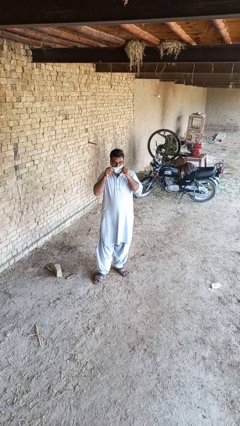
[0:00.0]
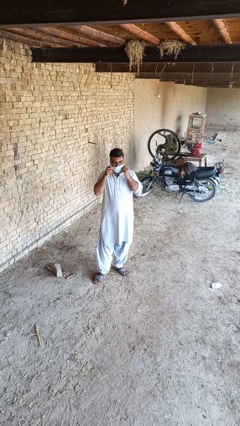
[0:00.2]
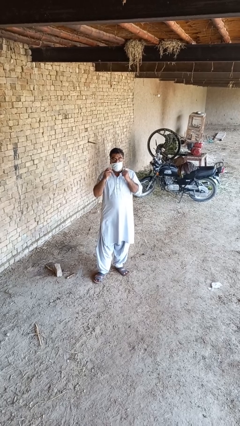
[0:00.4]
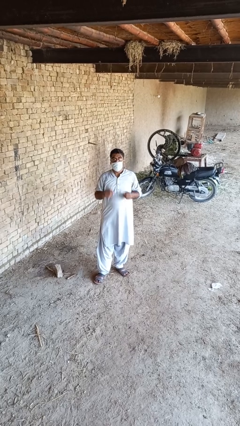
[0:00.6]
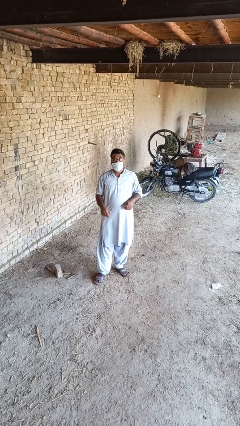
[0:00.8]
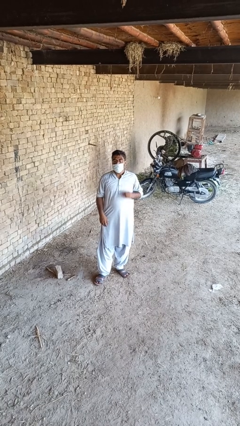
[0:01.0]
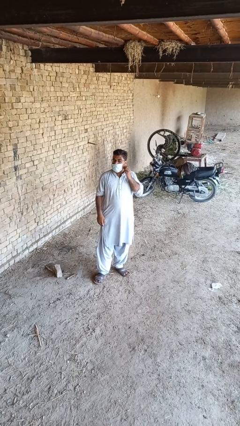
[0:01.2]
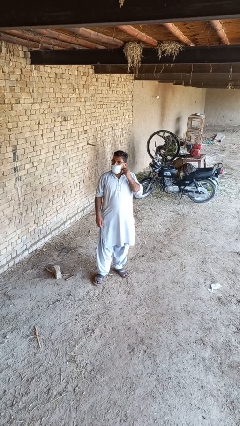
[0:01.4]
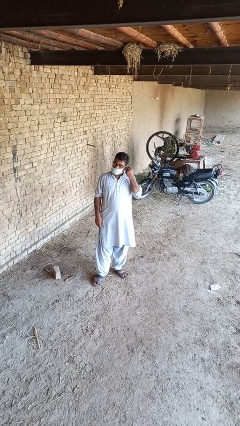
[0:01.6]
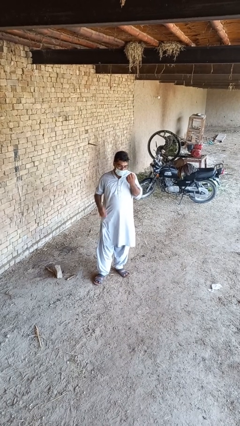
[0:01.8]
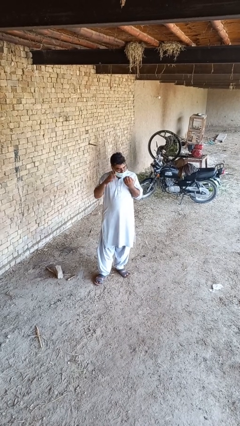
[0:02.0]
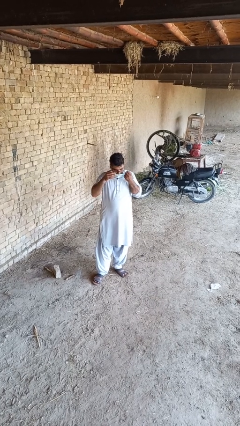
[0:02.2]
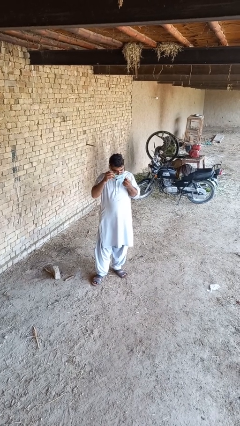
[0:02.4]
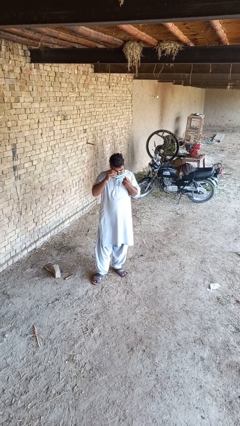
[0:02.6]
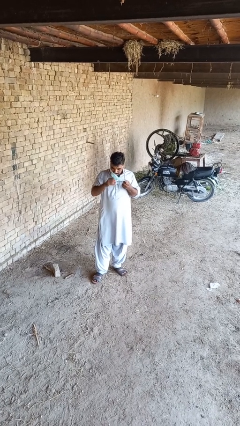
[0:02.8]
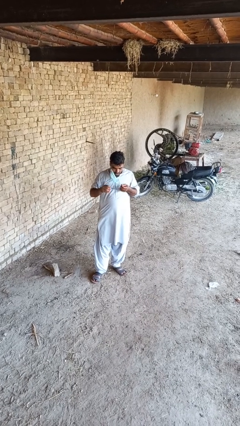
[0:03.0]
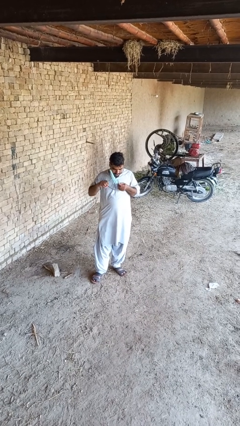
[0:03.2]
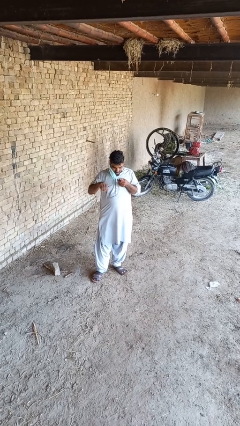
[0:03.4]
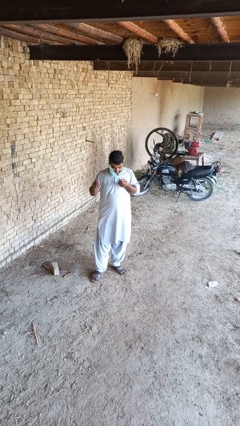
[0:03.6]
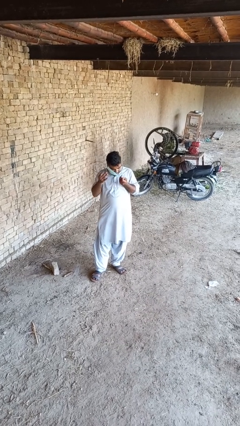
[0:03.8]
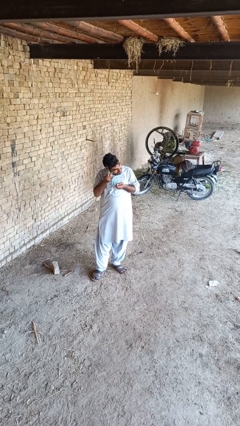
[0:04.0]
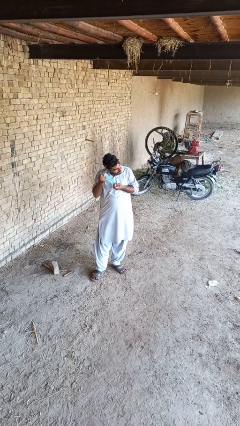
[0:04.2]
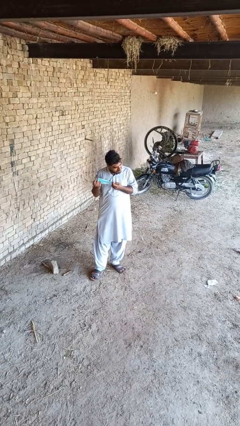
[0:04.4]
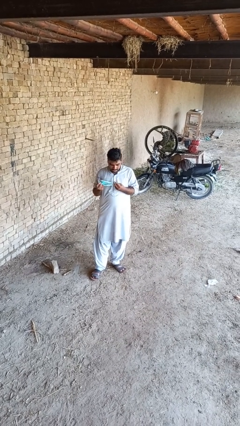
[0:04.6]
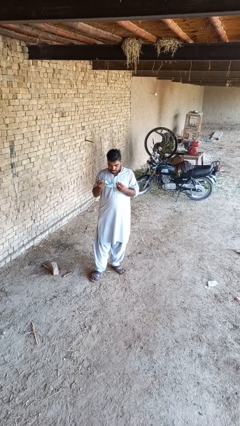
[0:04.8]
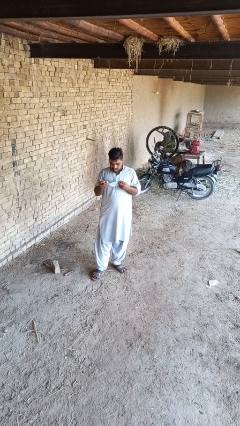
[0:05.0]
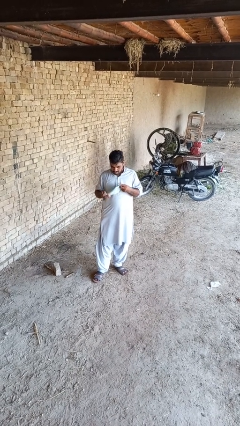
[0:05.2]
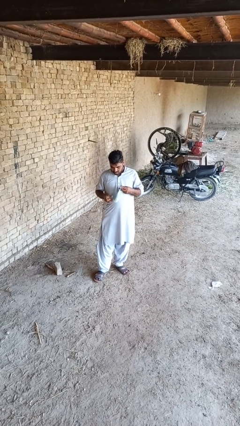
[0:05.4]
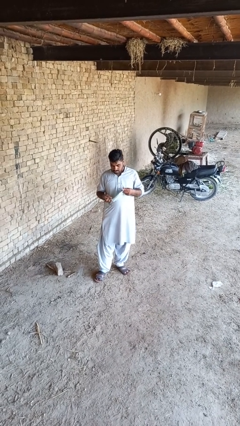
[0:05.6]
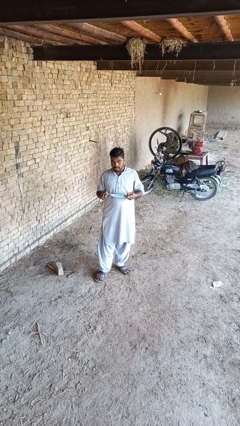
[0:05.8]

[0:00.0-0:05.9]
person takes off facemask

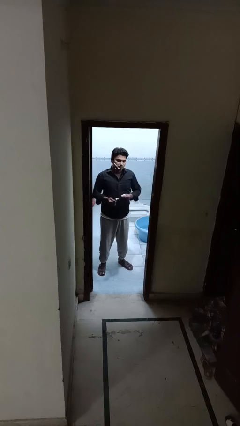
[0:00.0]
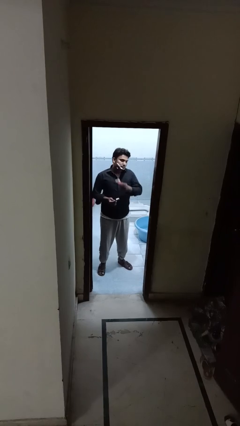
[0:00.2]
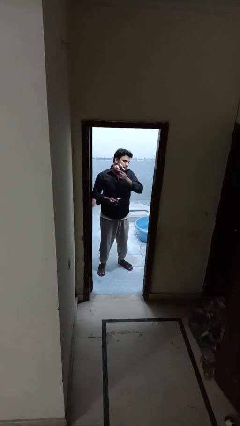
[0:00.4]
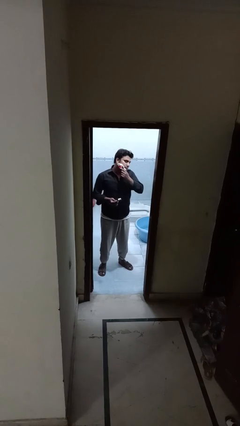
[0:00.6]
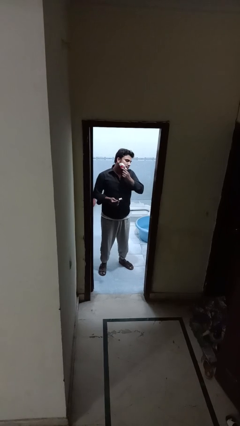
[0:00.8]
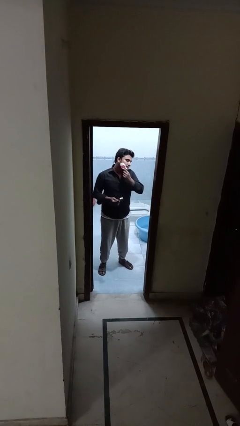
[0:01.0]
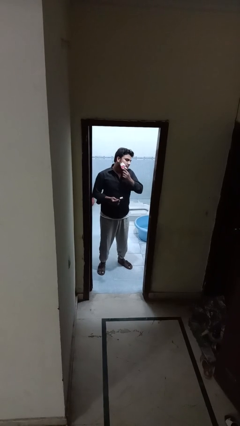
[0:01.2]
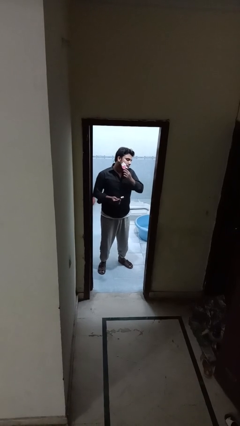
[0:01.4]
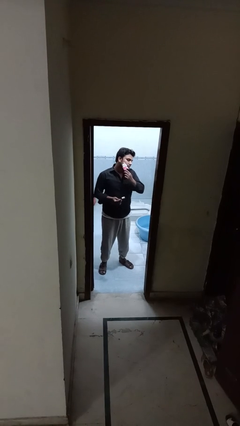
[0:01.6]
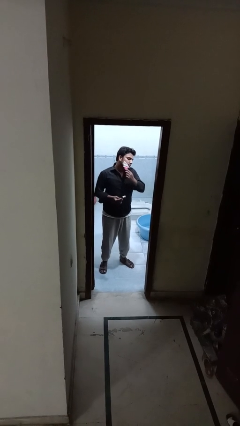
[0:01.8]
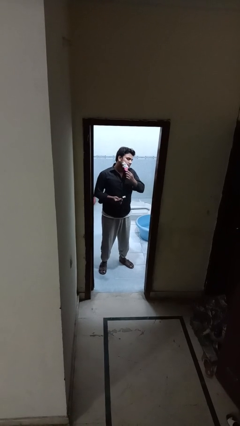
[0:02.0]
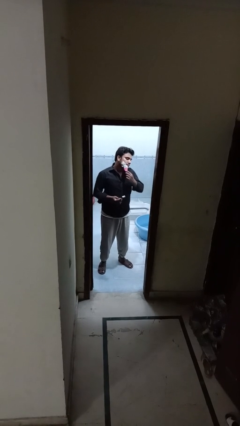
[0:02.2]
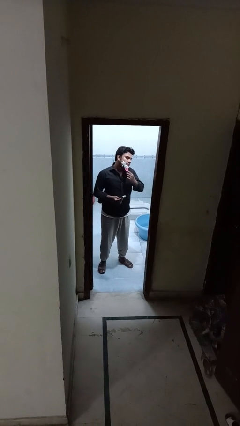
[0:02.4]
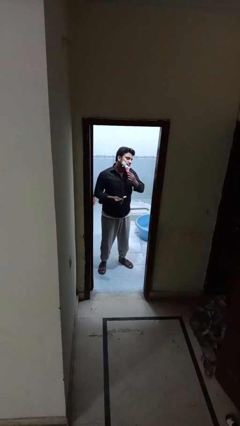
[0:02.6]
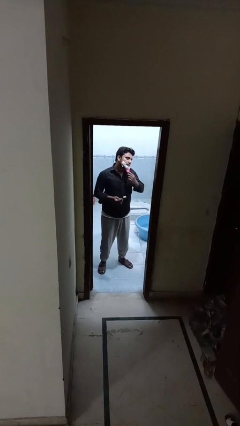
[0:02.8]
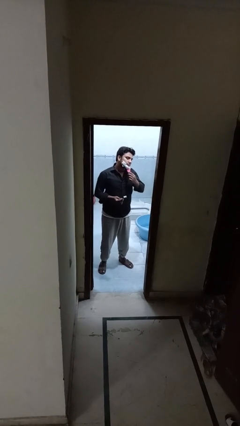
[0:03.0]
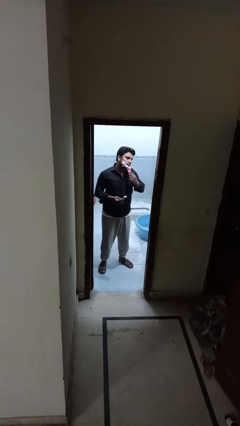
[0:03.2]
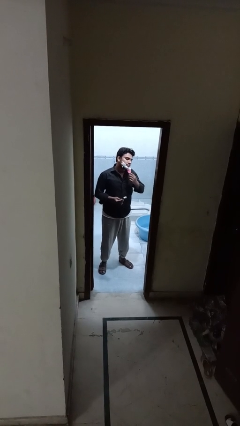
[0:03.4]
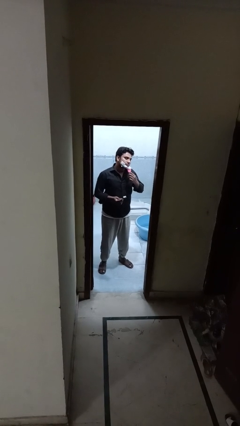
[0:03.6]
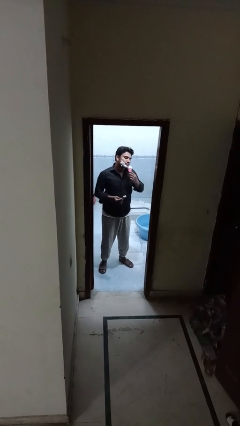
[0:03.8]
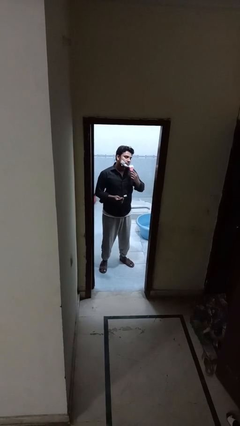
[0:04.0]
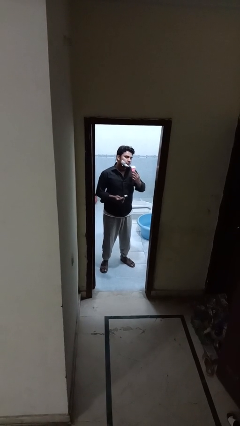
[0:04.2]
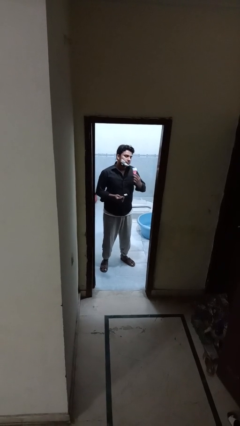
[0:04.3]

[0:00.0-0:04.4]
person applies shaving cream

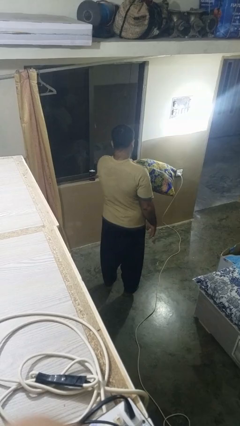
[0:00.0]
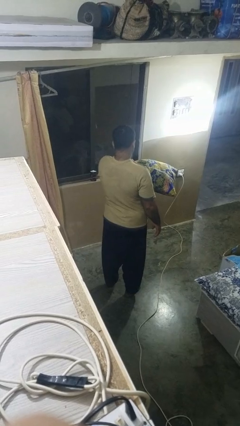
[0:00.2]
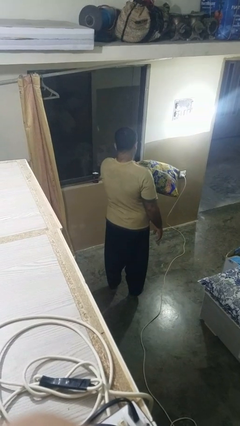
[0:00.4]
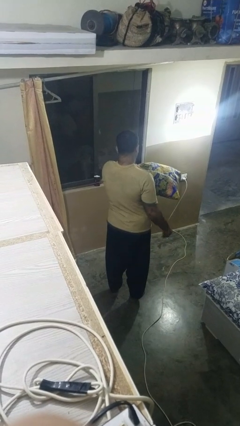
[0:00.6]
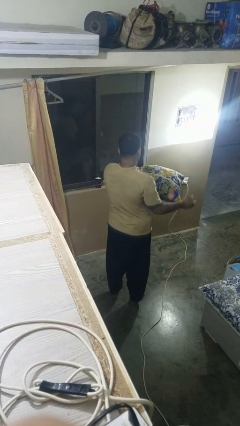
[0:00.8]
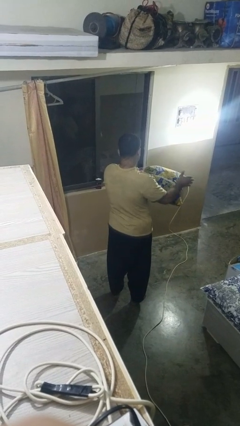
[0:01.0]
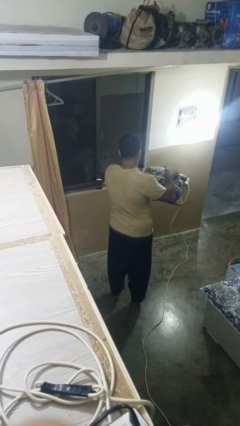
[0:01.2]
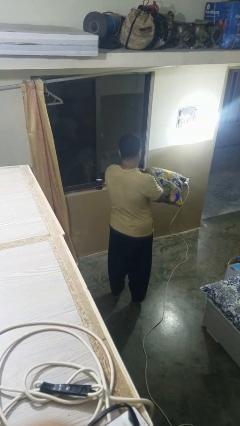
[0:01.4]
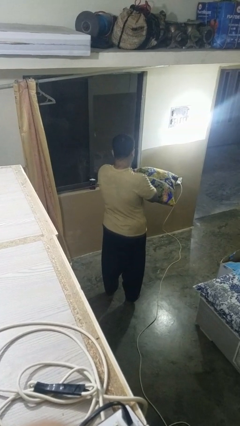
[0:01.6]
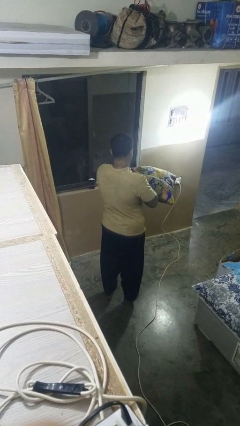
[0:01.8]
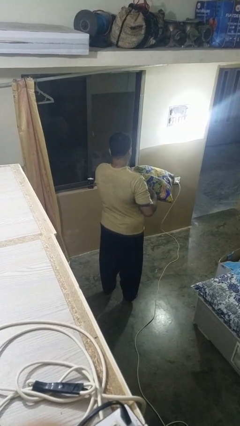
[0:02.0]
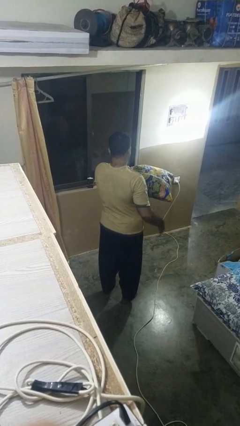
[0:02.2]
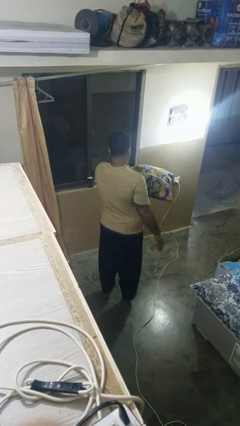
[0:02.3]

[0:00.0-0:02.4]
person waves hand over object

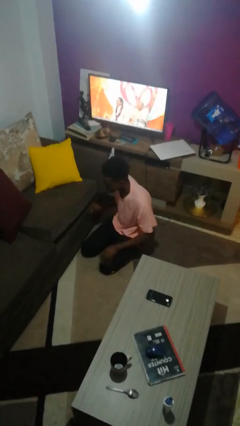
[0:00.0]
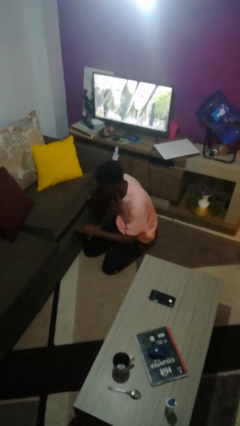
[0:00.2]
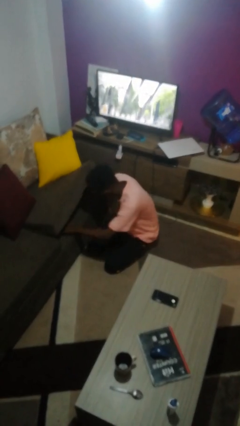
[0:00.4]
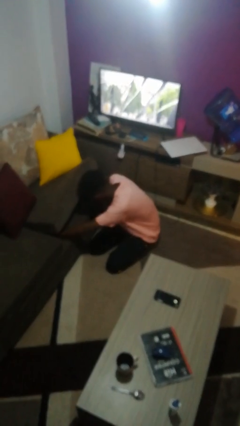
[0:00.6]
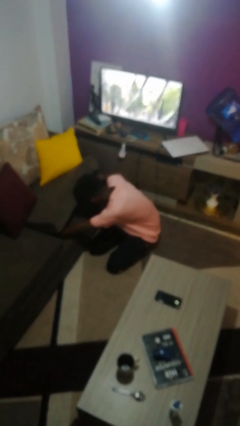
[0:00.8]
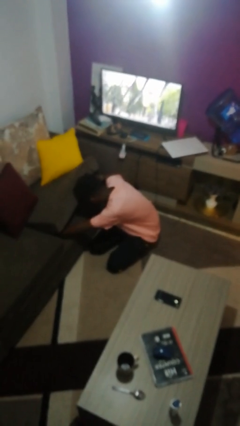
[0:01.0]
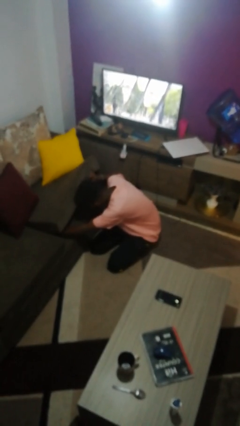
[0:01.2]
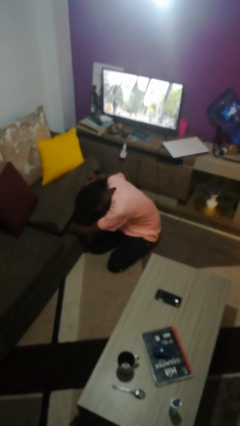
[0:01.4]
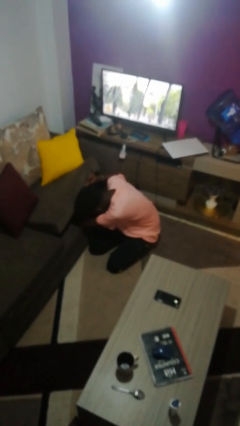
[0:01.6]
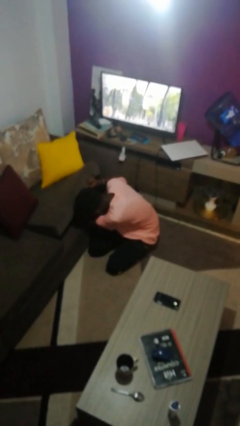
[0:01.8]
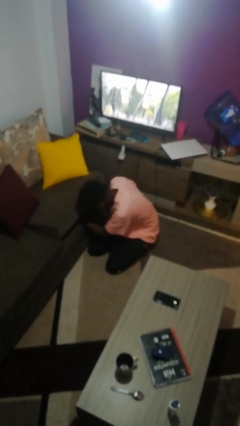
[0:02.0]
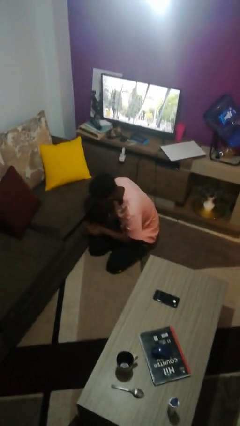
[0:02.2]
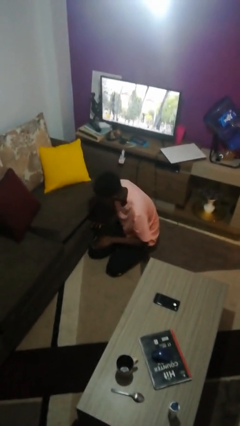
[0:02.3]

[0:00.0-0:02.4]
person searches under couch

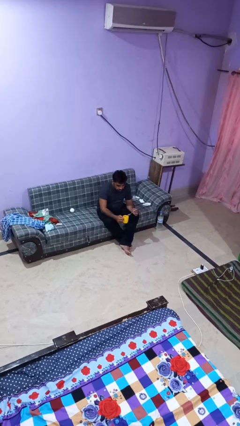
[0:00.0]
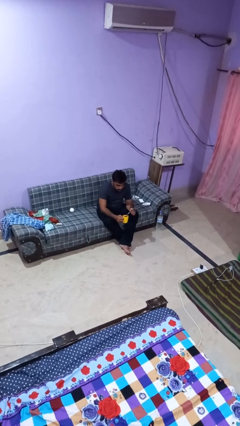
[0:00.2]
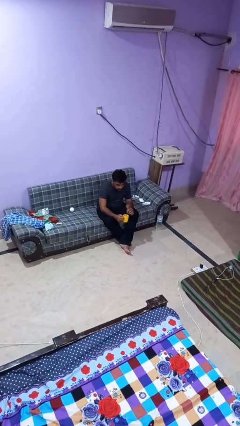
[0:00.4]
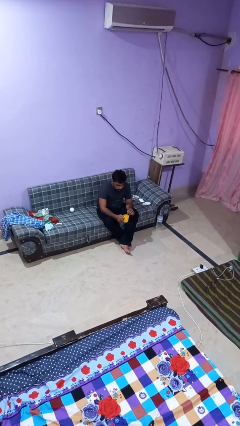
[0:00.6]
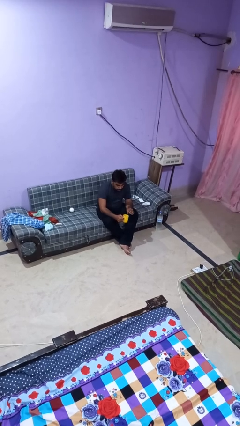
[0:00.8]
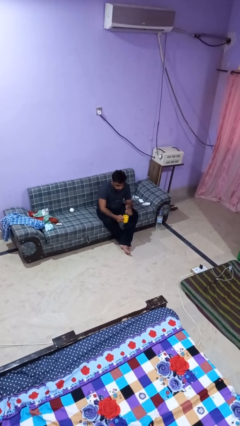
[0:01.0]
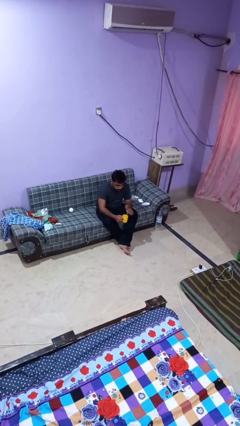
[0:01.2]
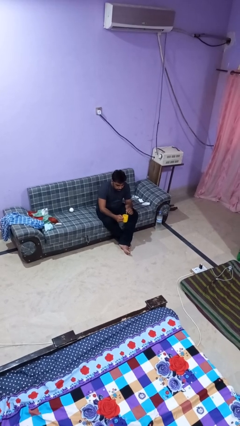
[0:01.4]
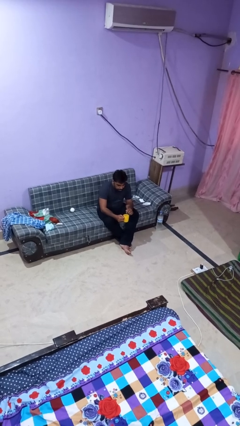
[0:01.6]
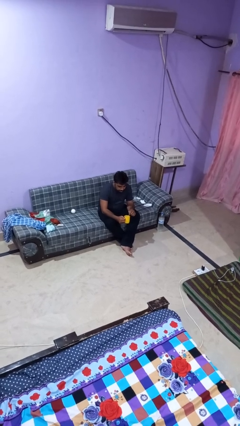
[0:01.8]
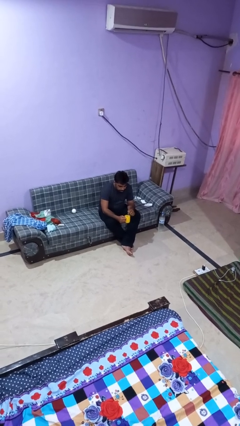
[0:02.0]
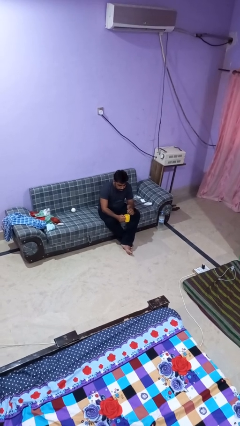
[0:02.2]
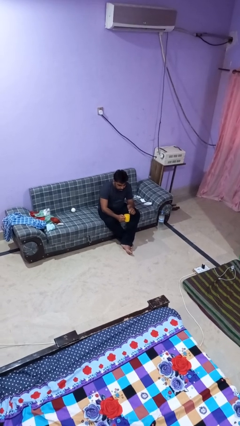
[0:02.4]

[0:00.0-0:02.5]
person stirs mug
